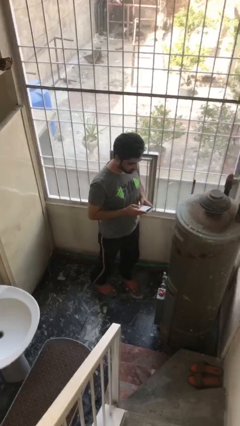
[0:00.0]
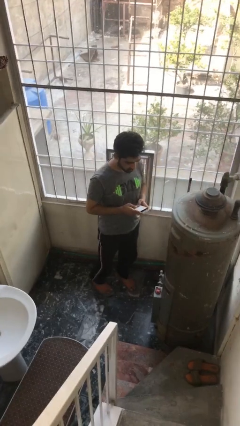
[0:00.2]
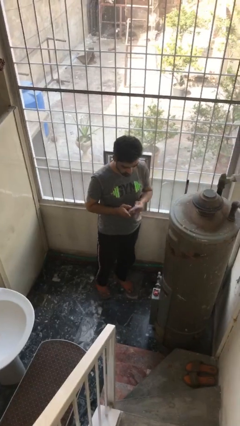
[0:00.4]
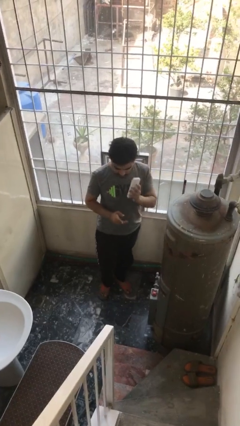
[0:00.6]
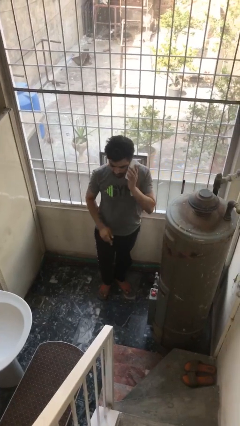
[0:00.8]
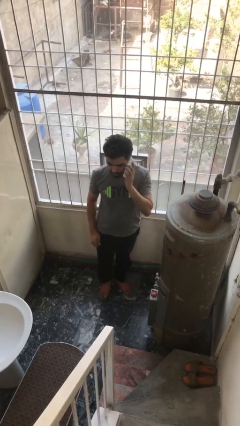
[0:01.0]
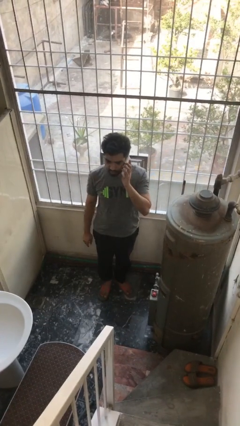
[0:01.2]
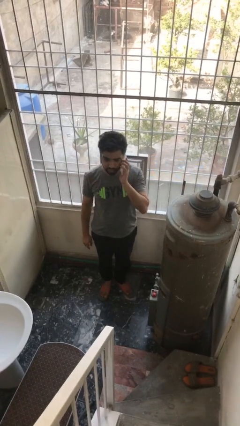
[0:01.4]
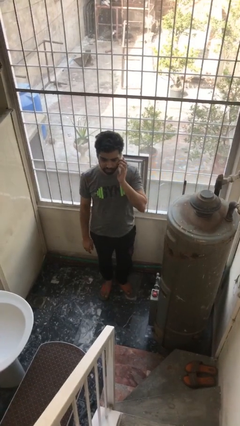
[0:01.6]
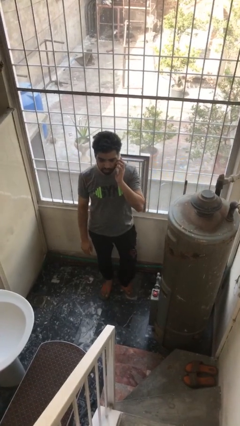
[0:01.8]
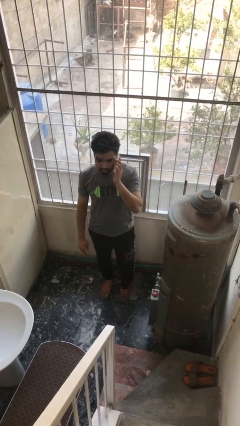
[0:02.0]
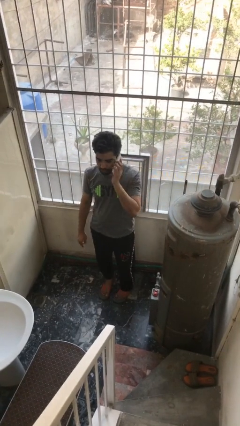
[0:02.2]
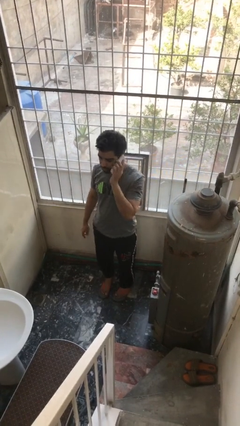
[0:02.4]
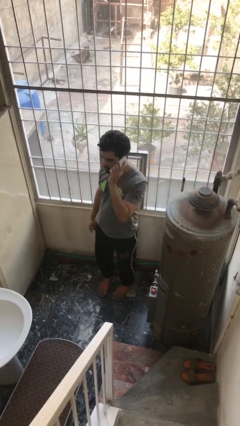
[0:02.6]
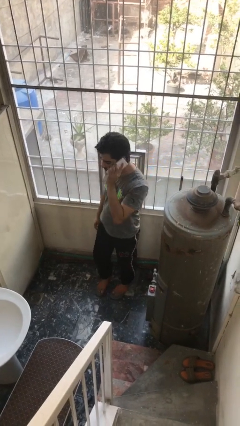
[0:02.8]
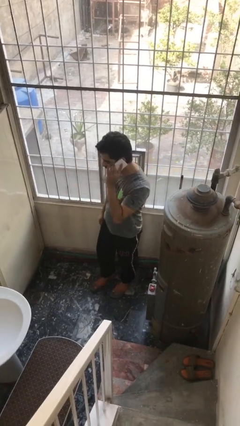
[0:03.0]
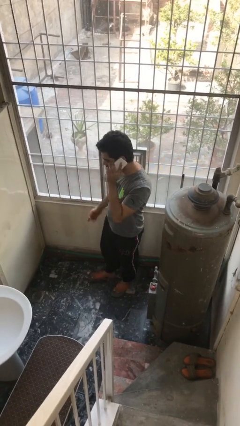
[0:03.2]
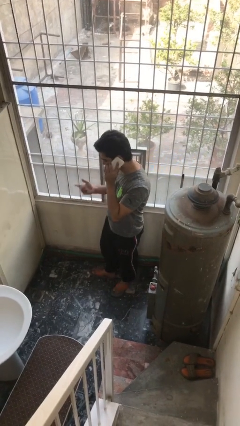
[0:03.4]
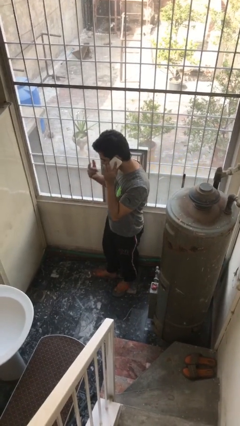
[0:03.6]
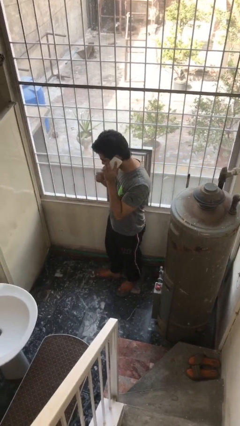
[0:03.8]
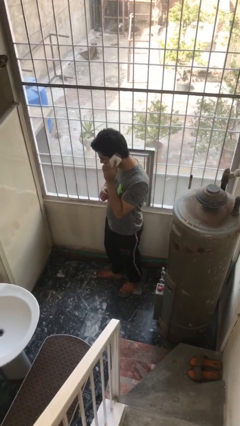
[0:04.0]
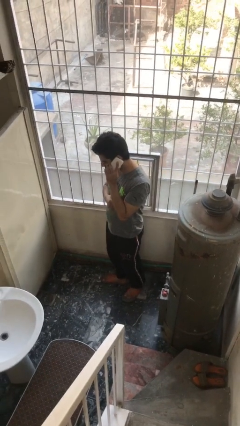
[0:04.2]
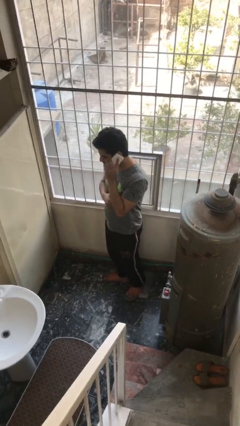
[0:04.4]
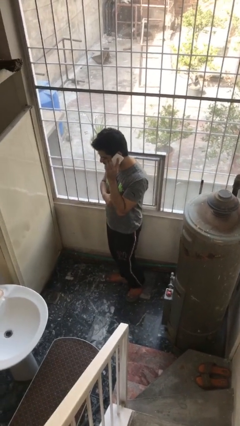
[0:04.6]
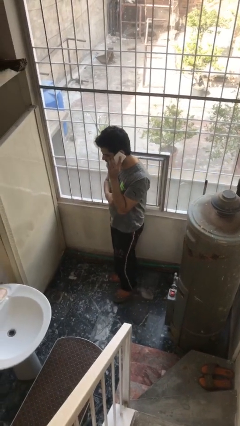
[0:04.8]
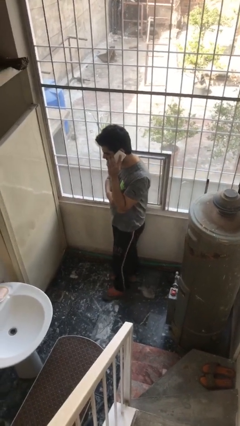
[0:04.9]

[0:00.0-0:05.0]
person talks on phone

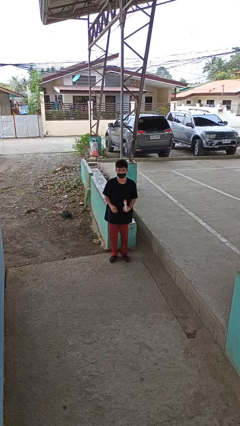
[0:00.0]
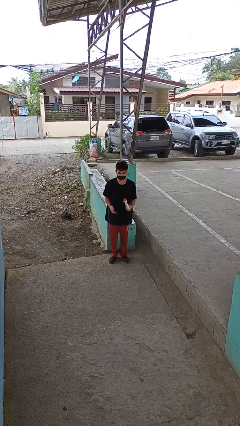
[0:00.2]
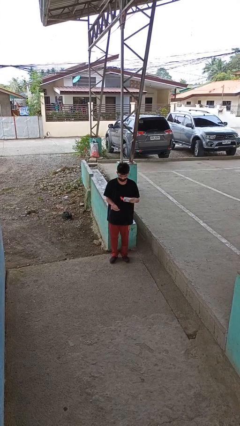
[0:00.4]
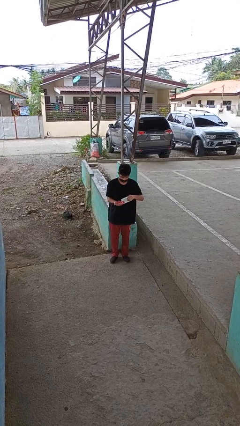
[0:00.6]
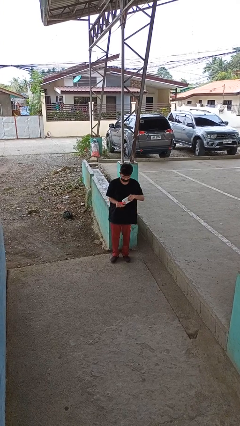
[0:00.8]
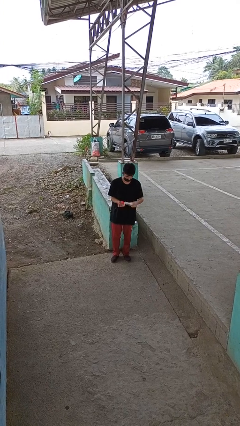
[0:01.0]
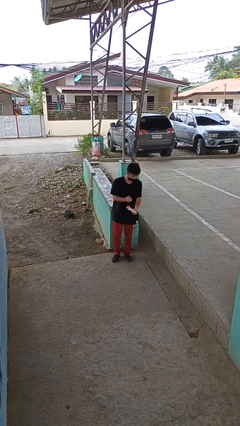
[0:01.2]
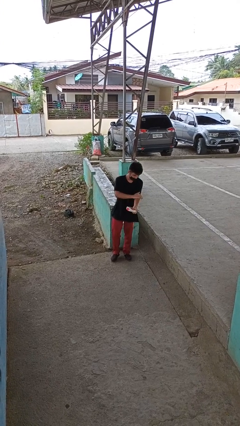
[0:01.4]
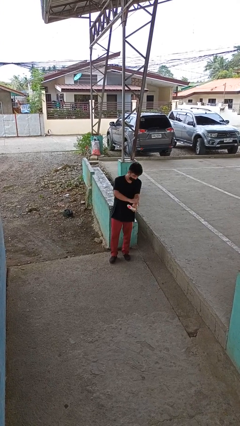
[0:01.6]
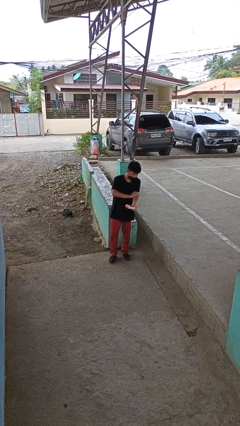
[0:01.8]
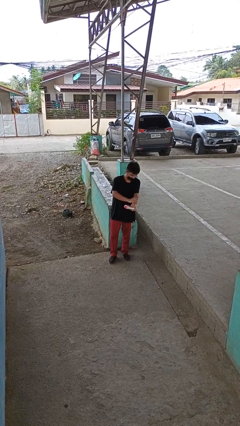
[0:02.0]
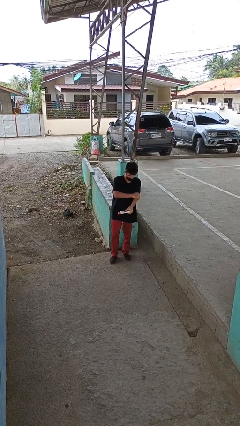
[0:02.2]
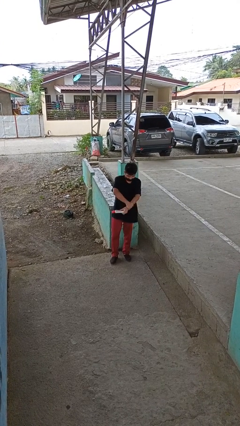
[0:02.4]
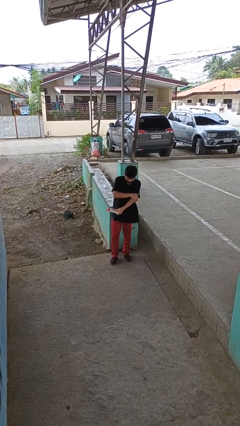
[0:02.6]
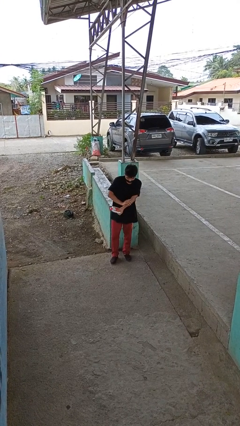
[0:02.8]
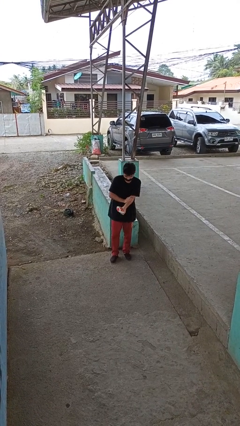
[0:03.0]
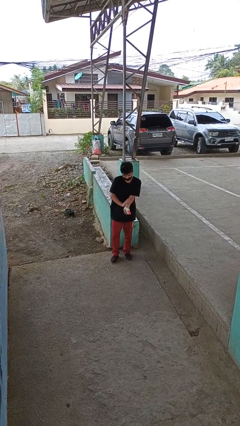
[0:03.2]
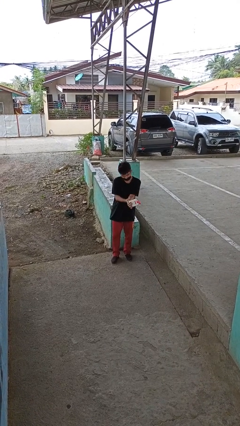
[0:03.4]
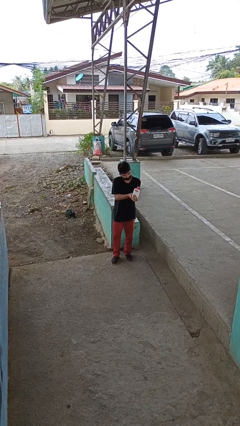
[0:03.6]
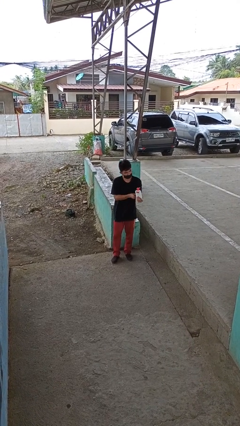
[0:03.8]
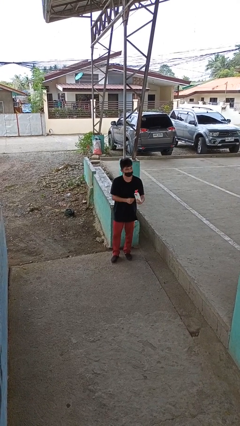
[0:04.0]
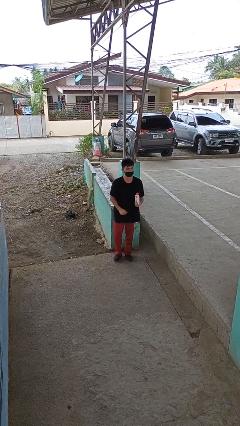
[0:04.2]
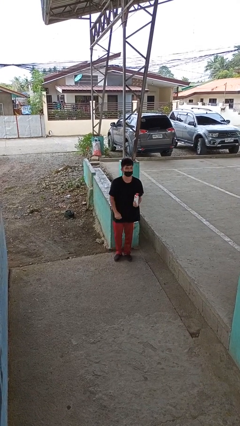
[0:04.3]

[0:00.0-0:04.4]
person applies sunscreen

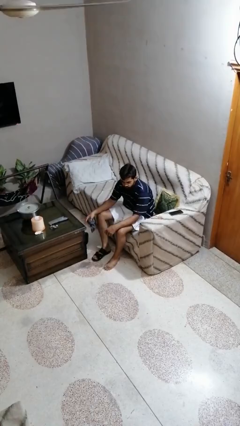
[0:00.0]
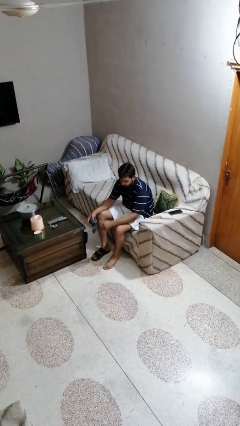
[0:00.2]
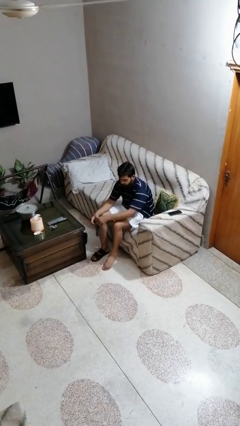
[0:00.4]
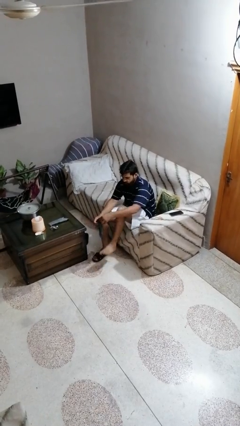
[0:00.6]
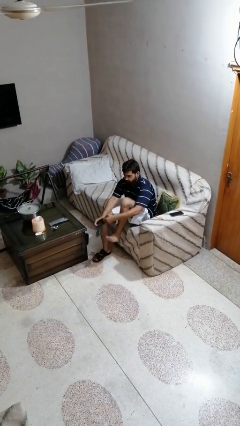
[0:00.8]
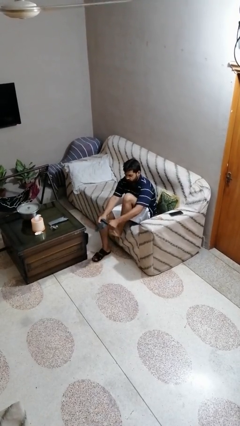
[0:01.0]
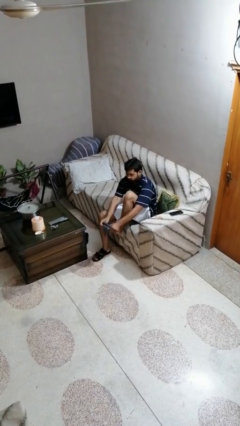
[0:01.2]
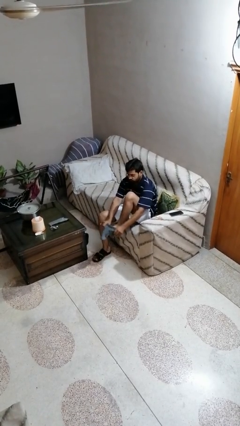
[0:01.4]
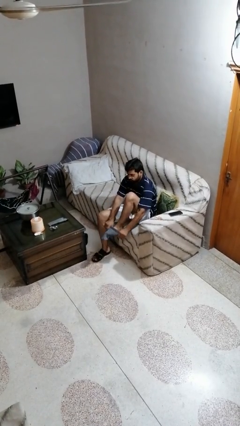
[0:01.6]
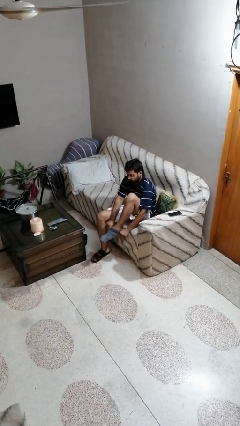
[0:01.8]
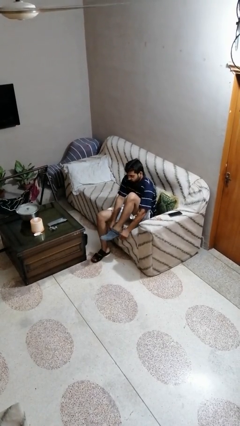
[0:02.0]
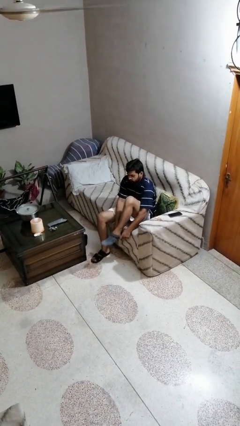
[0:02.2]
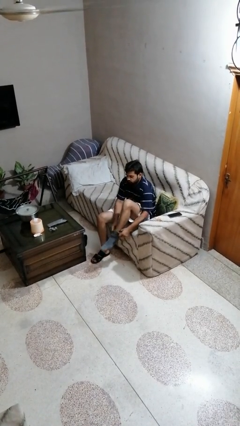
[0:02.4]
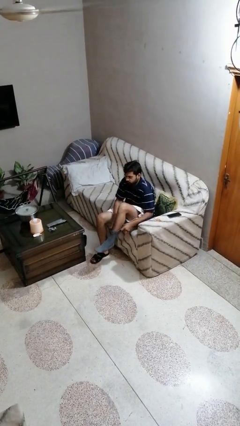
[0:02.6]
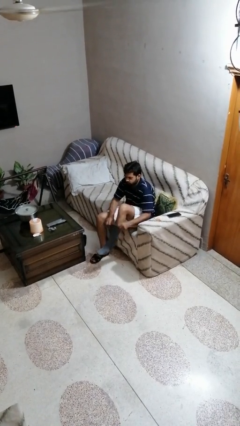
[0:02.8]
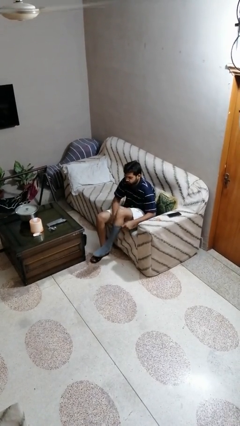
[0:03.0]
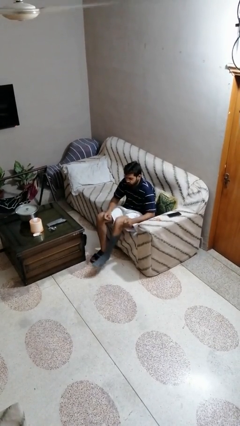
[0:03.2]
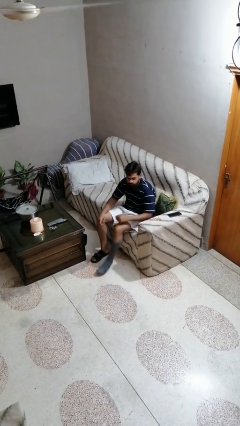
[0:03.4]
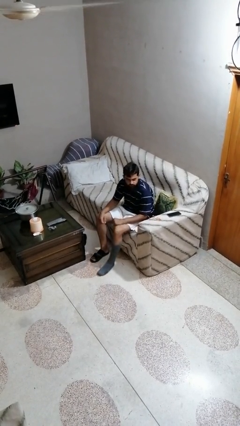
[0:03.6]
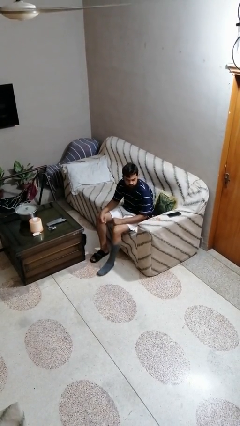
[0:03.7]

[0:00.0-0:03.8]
person puts on socks

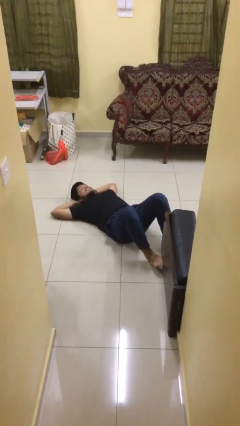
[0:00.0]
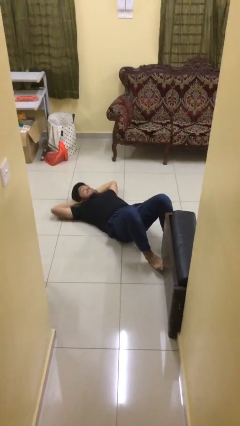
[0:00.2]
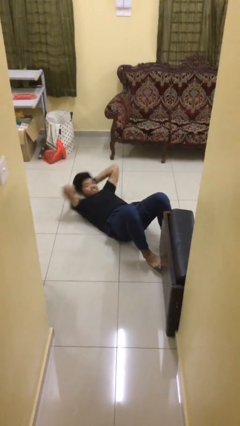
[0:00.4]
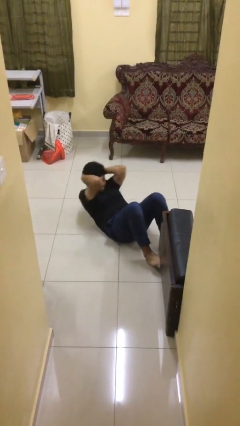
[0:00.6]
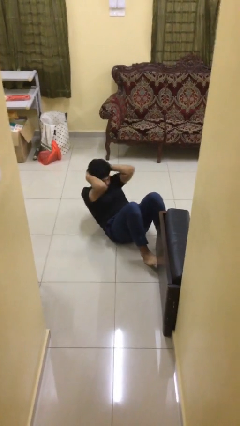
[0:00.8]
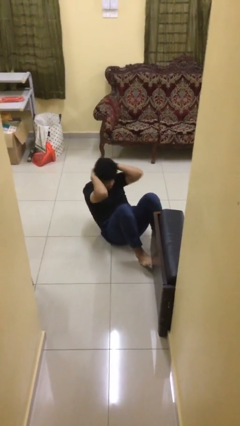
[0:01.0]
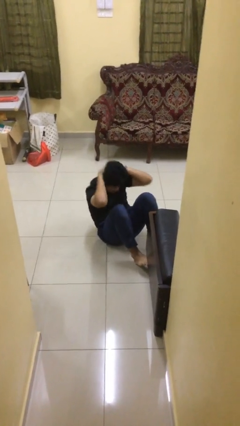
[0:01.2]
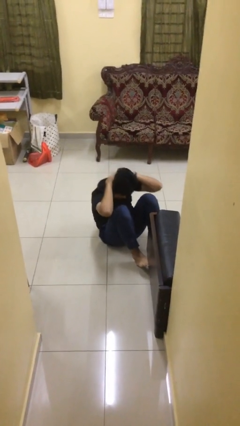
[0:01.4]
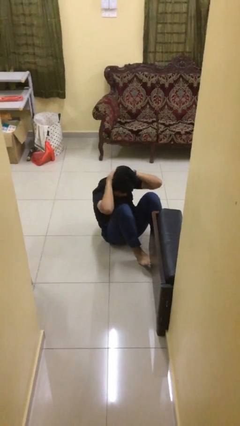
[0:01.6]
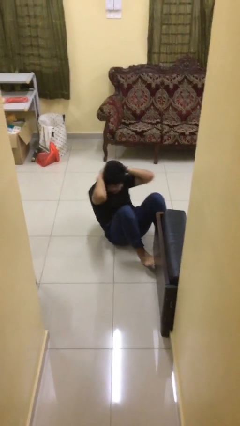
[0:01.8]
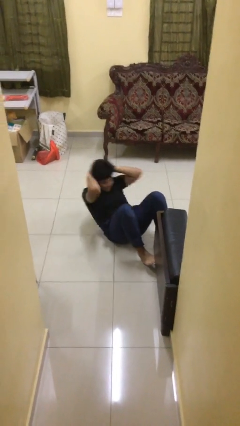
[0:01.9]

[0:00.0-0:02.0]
person exercises with situp

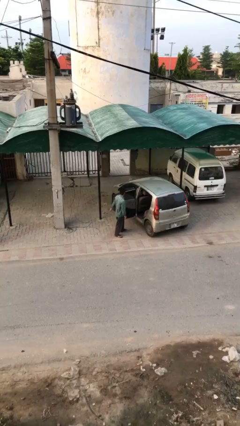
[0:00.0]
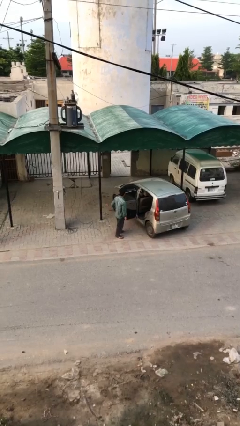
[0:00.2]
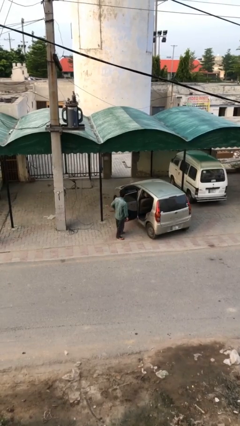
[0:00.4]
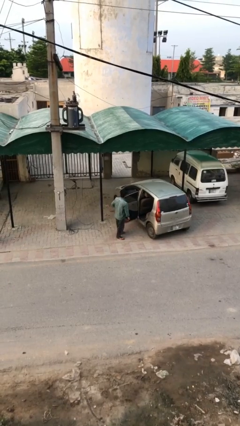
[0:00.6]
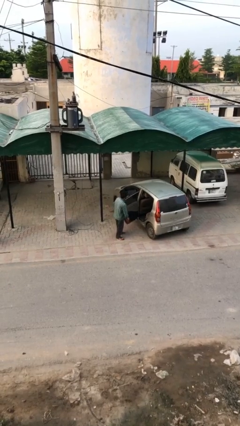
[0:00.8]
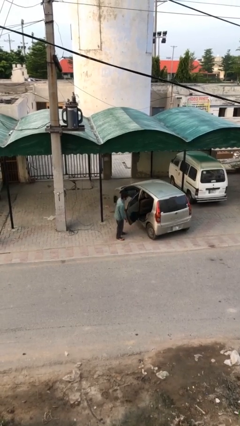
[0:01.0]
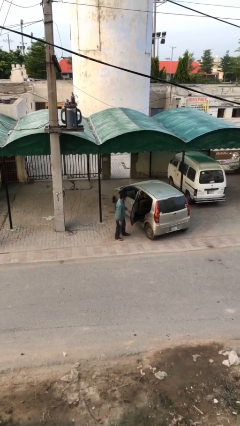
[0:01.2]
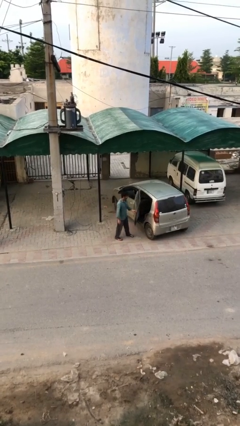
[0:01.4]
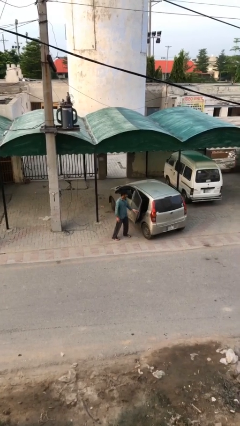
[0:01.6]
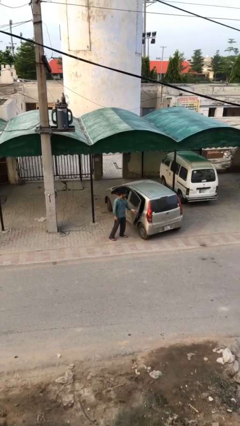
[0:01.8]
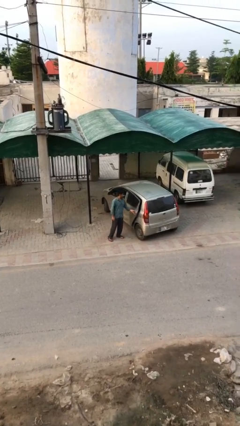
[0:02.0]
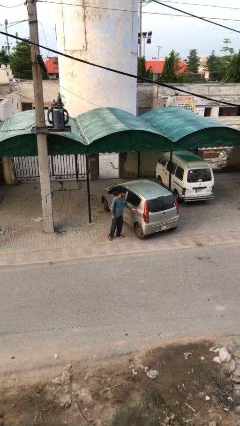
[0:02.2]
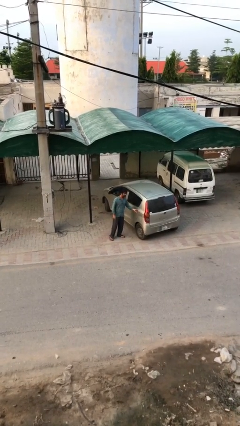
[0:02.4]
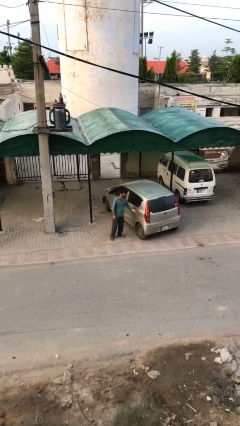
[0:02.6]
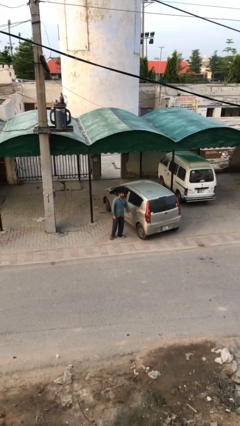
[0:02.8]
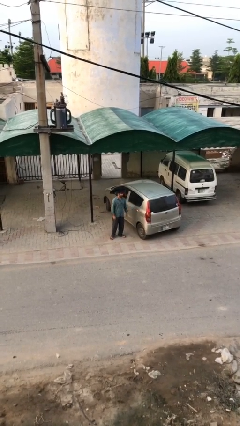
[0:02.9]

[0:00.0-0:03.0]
person closes car door
